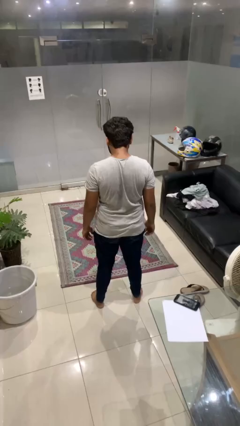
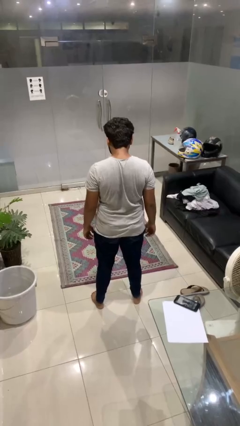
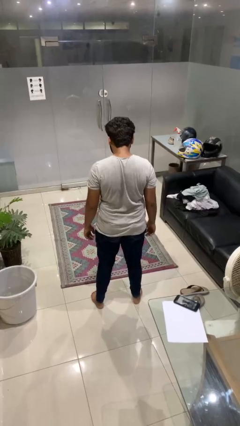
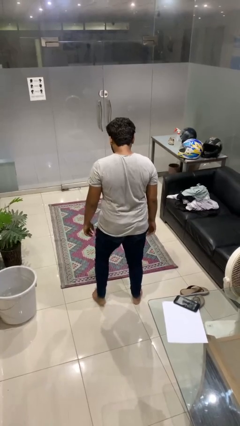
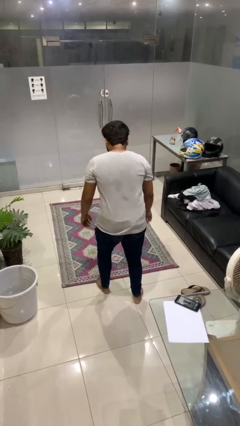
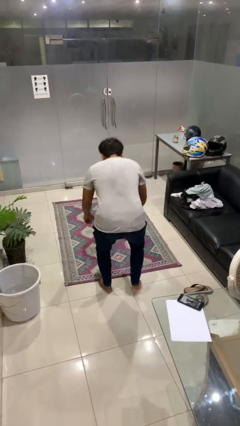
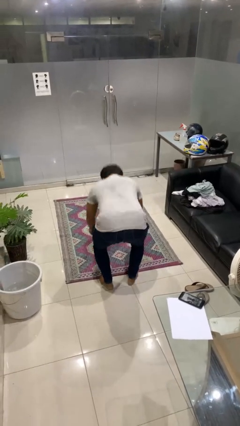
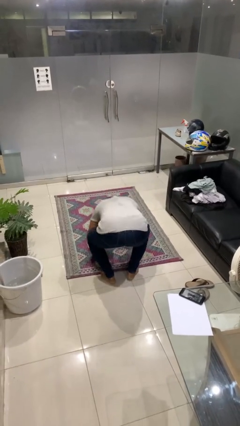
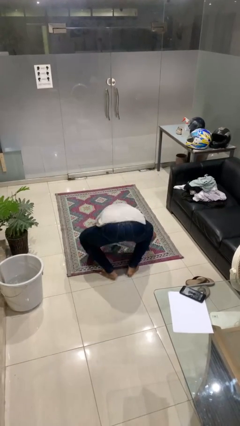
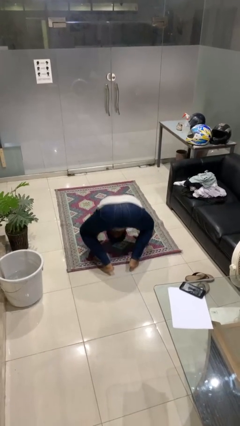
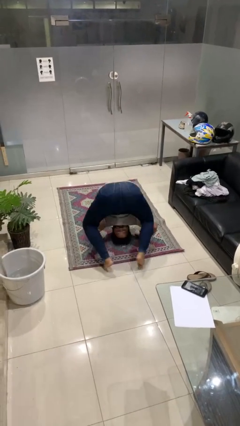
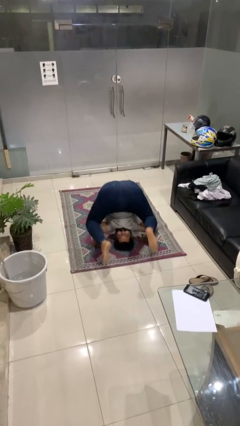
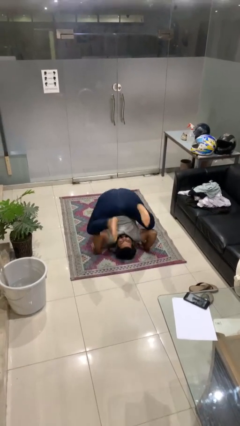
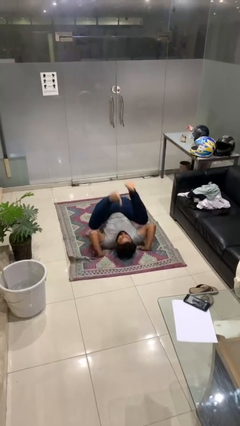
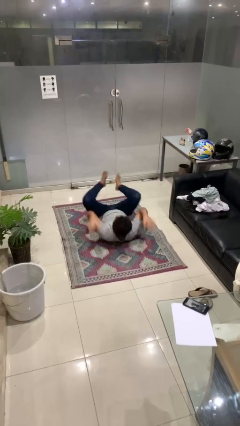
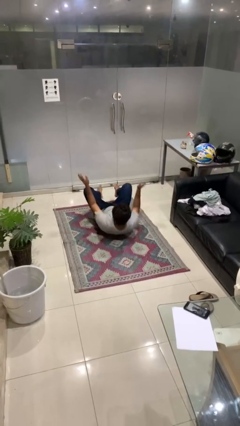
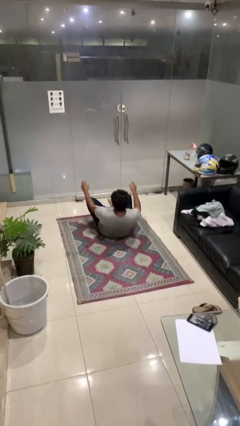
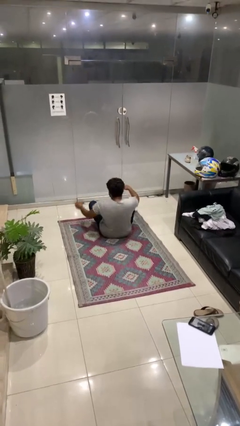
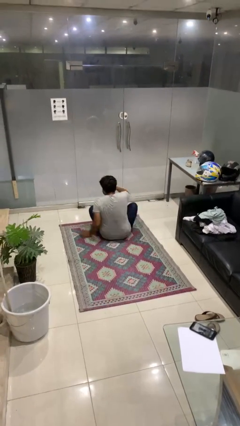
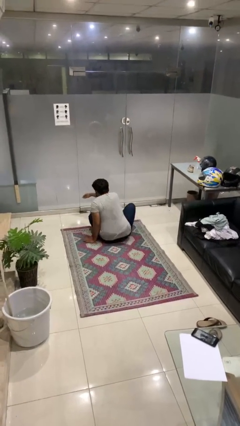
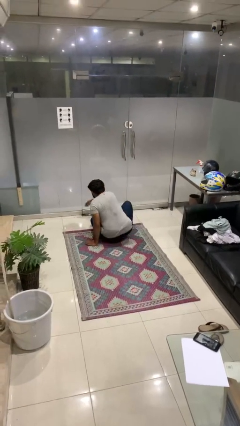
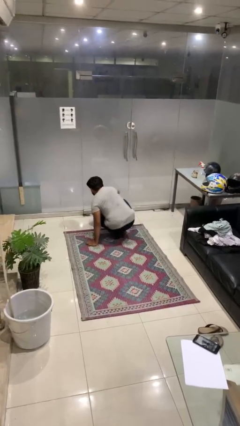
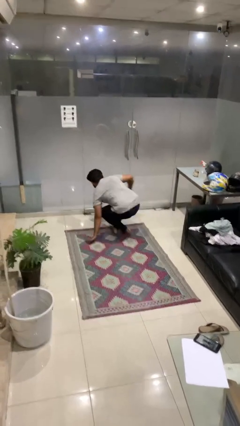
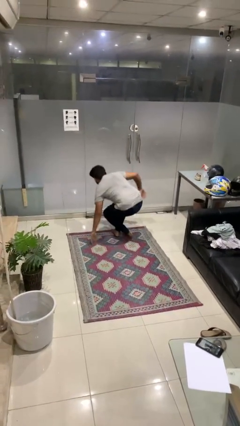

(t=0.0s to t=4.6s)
person somersaults

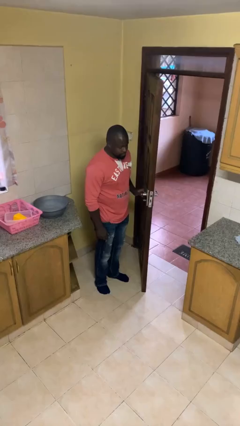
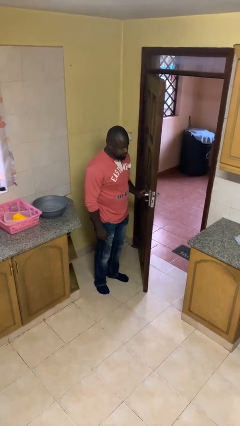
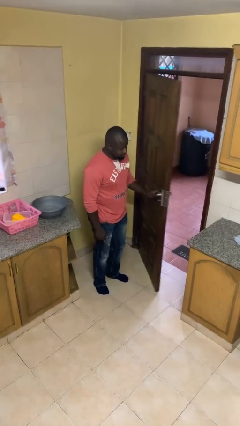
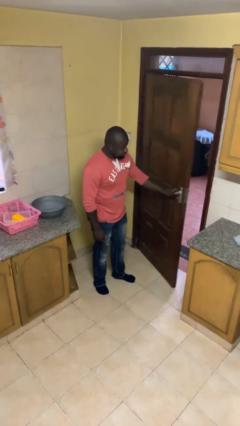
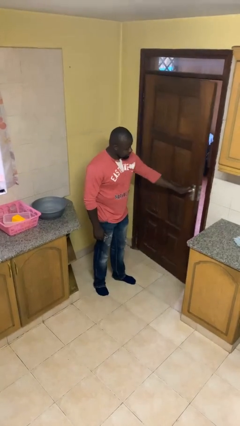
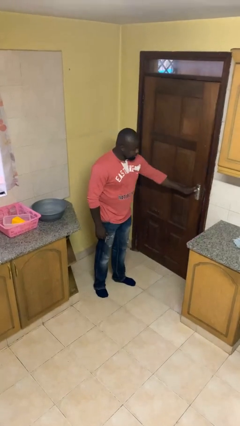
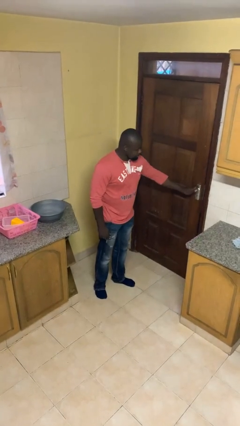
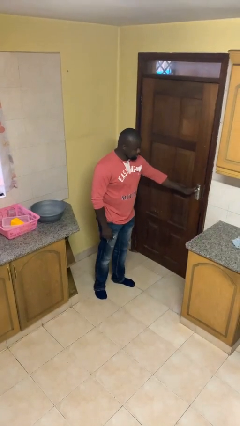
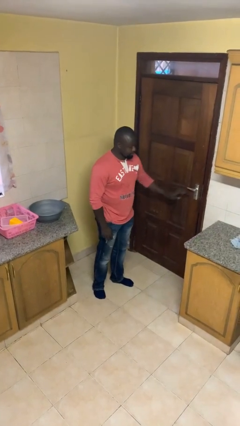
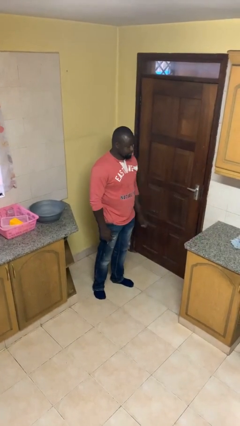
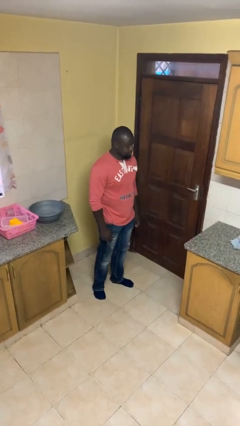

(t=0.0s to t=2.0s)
person closes facility door

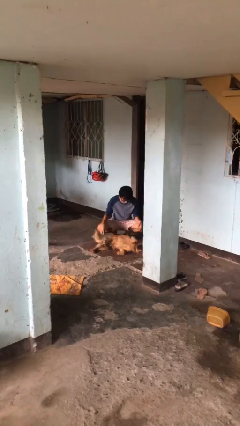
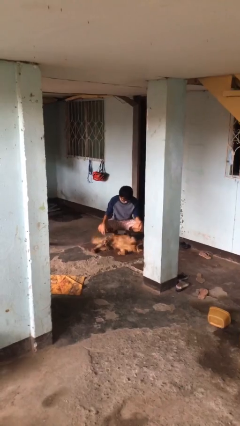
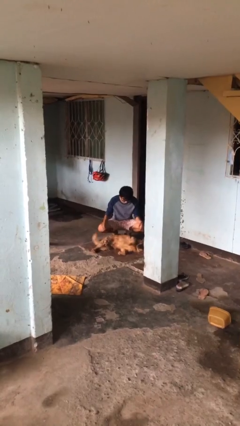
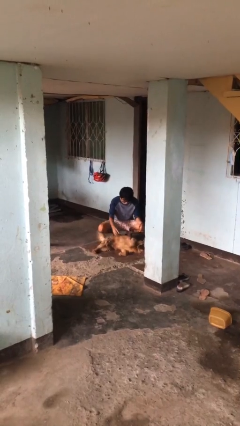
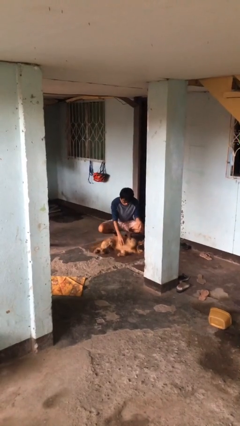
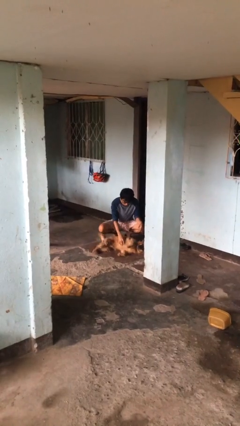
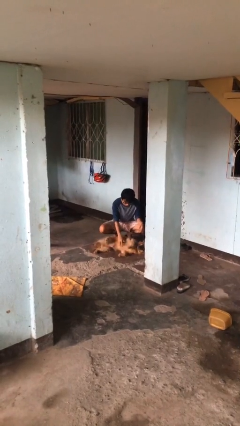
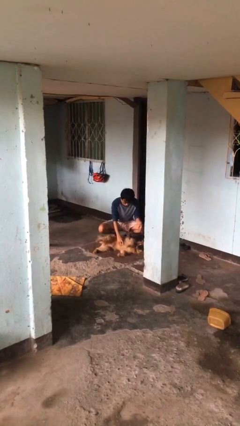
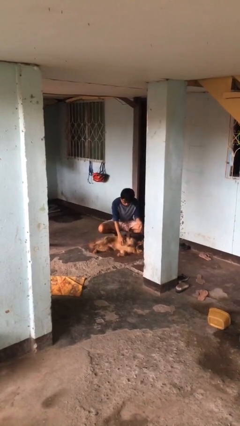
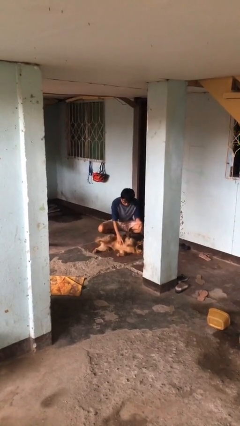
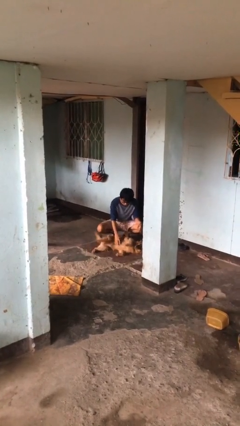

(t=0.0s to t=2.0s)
person pets dog

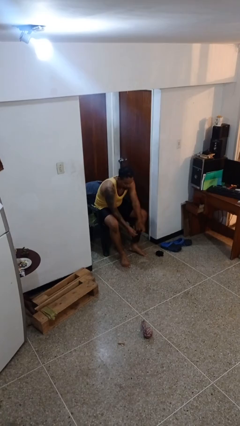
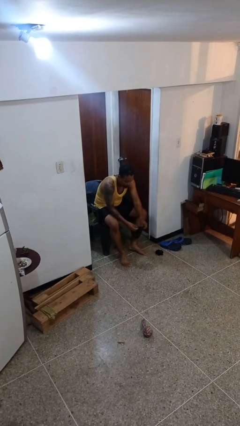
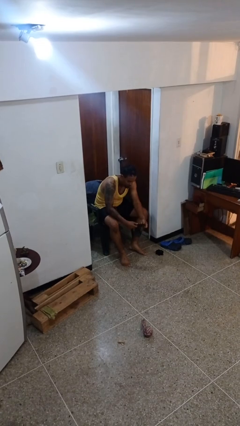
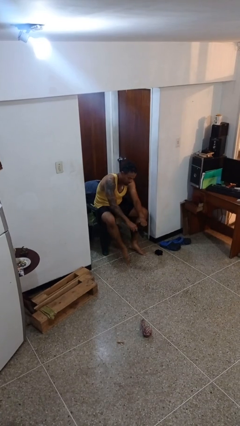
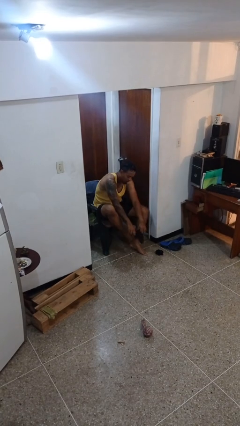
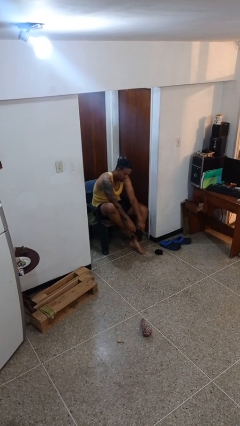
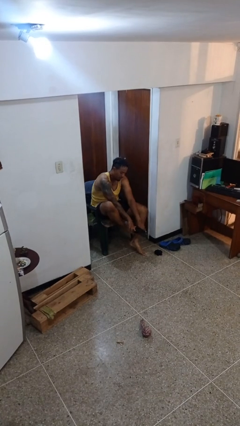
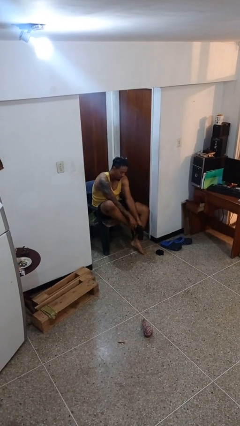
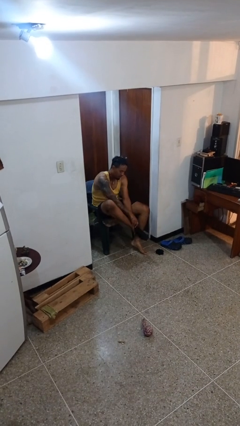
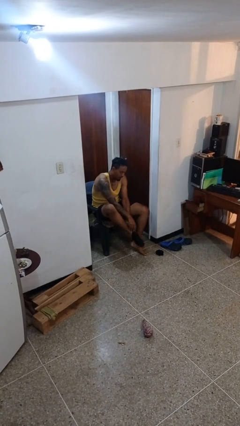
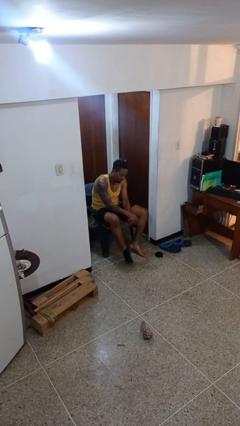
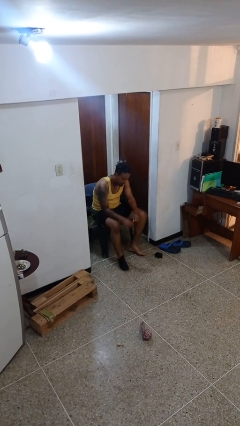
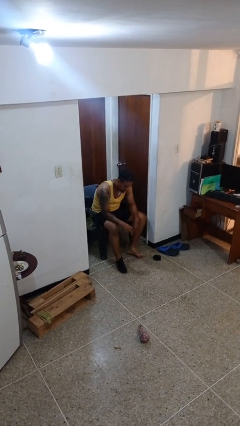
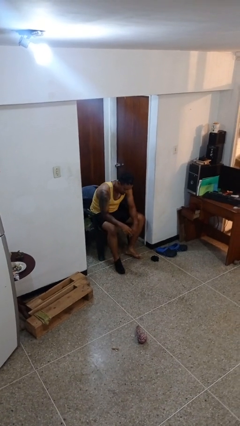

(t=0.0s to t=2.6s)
person puts on socks

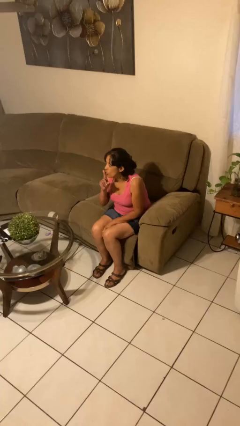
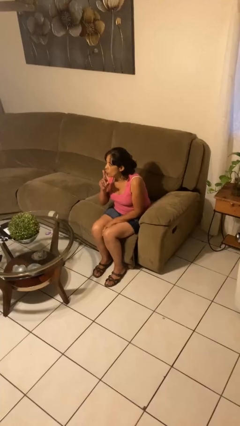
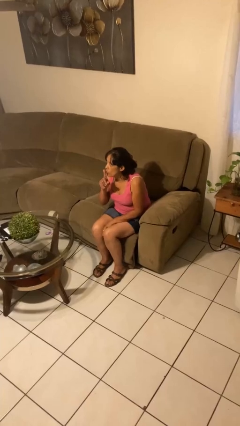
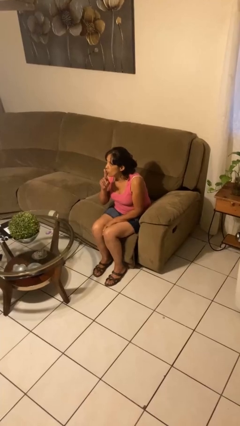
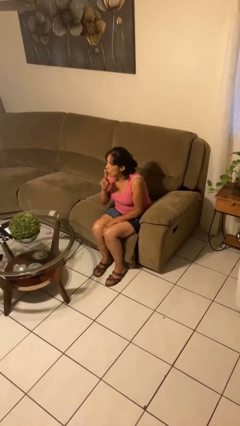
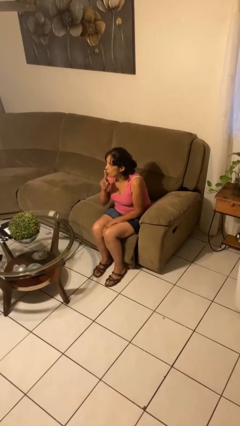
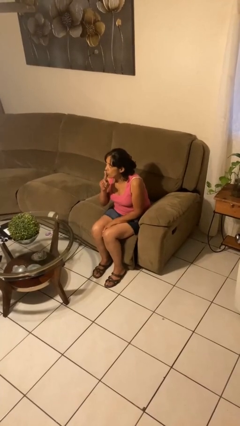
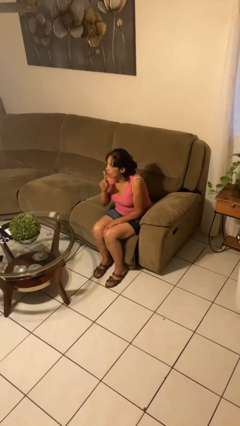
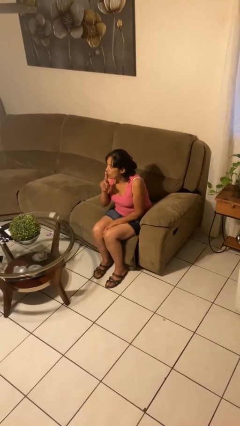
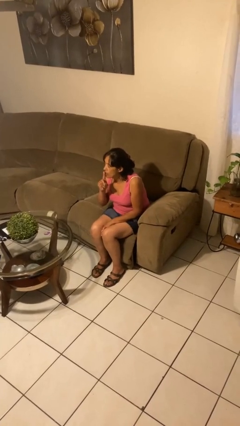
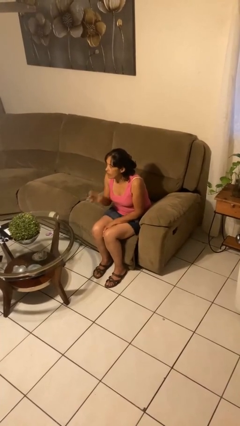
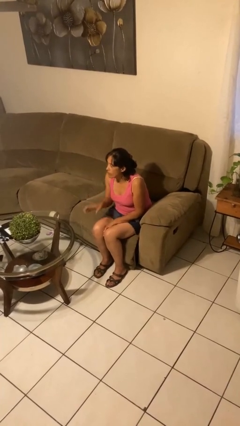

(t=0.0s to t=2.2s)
person gestures be quiet

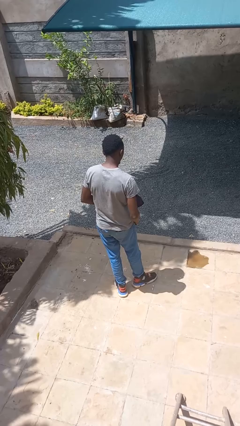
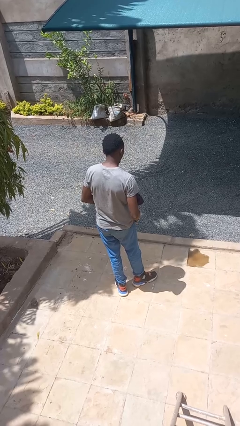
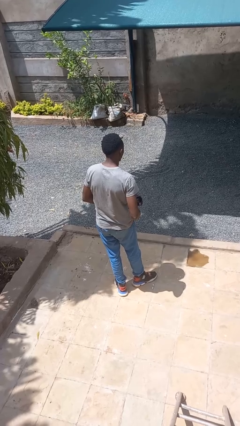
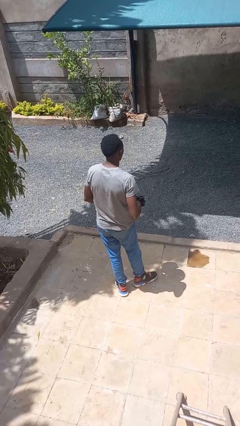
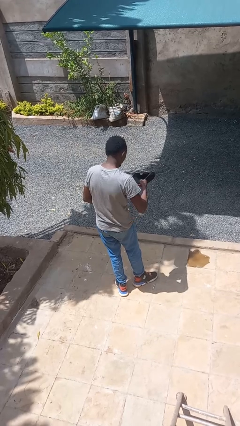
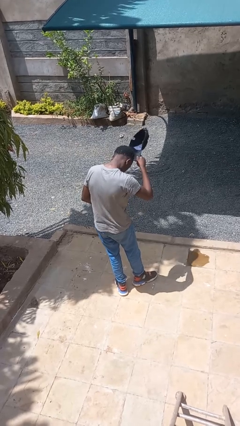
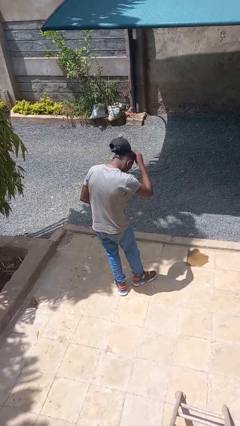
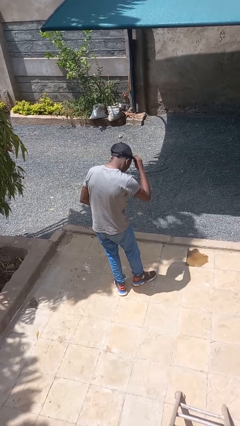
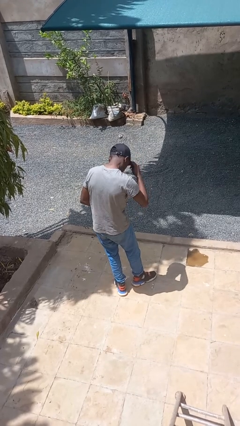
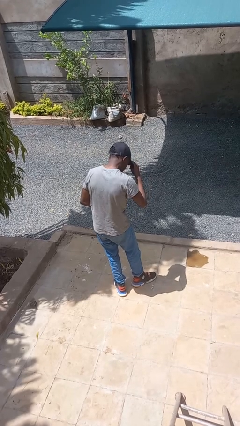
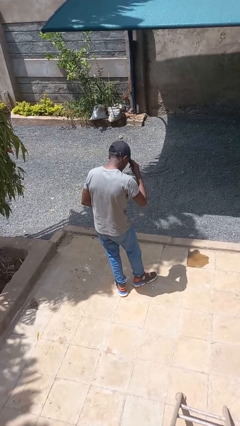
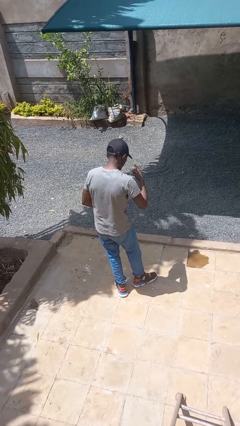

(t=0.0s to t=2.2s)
person puts on hat

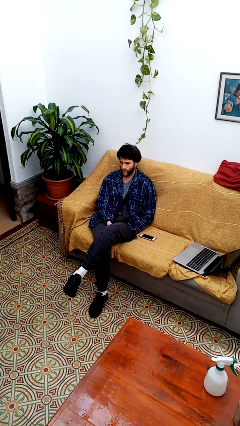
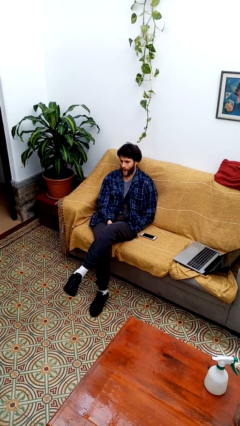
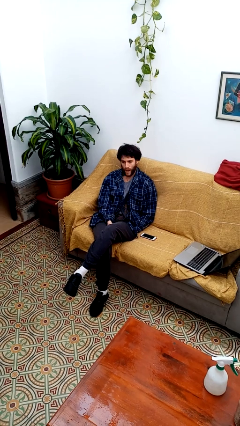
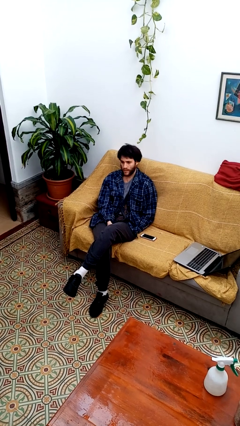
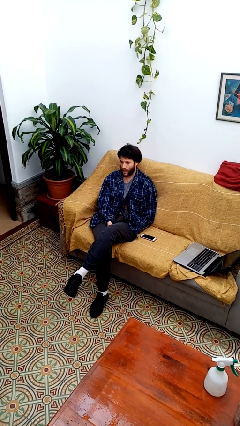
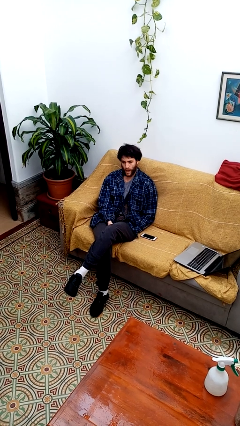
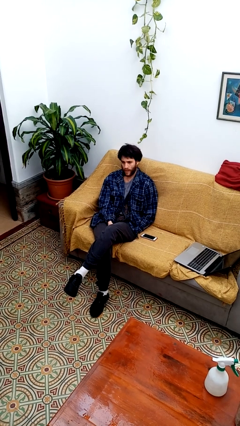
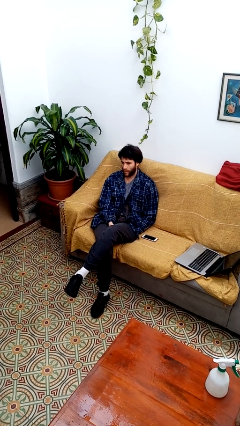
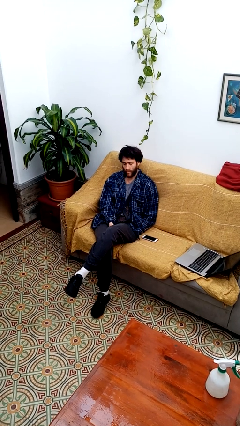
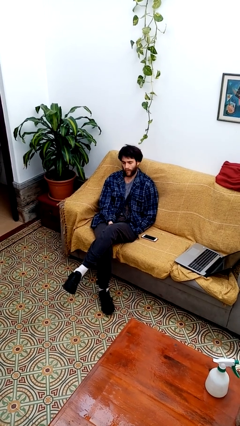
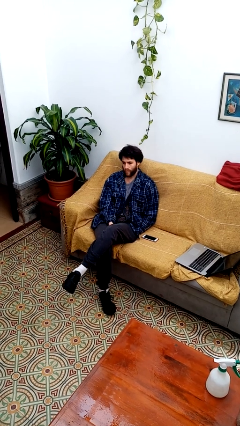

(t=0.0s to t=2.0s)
person shakes head
